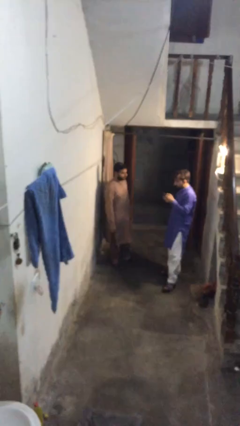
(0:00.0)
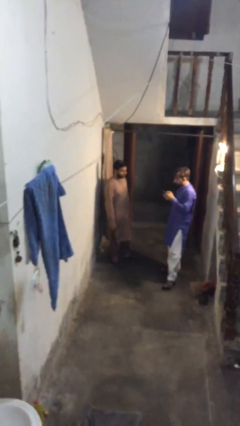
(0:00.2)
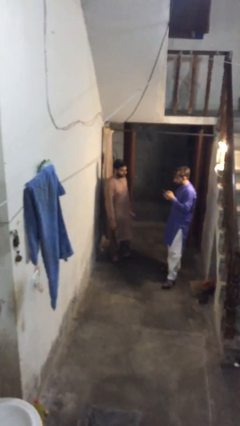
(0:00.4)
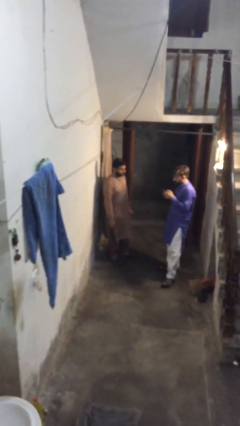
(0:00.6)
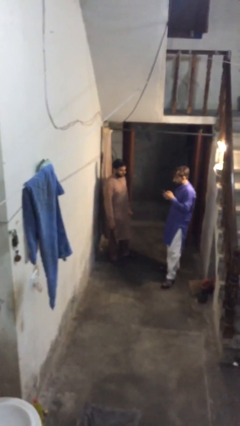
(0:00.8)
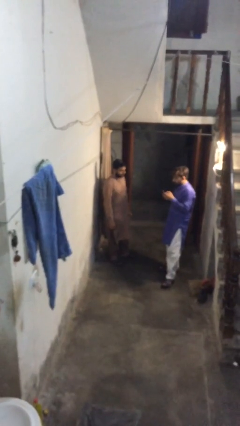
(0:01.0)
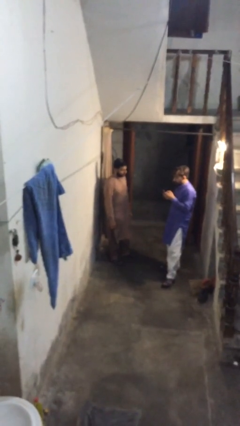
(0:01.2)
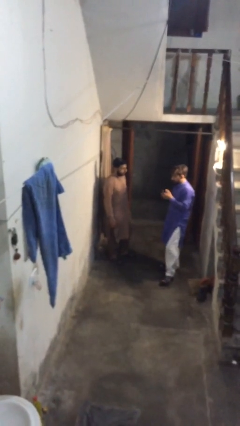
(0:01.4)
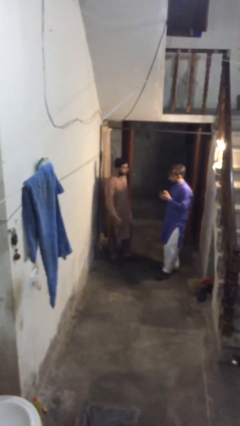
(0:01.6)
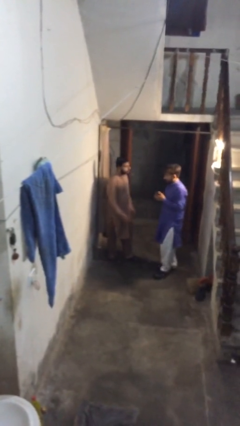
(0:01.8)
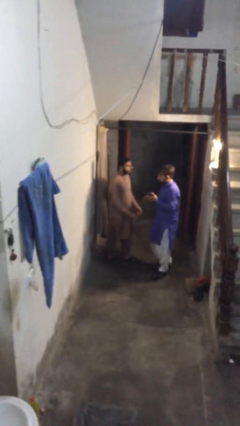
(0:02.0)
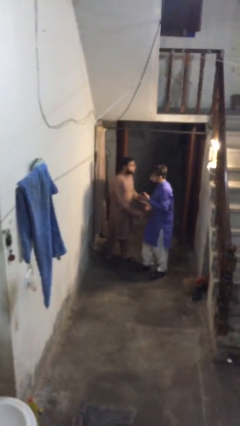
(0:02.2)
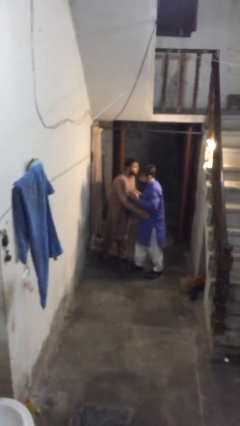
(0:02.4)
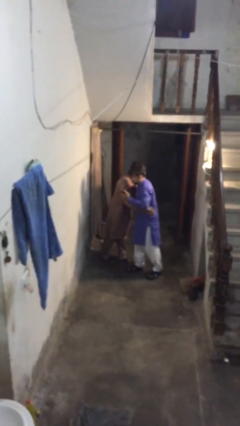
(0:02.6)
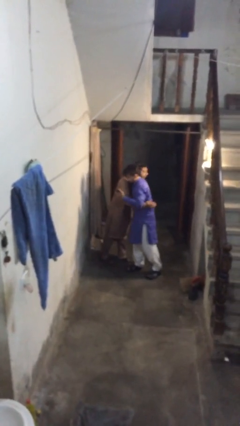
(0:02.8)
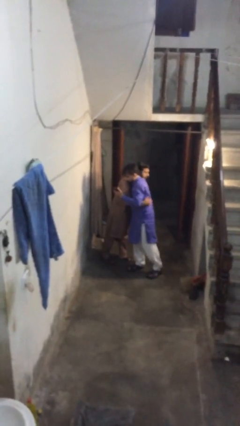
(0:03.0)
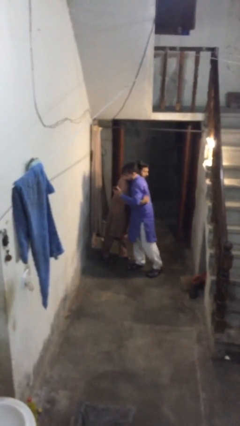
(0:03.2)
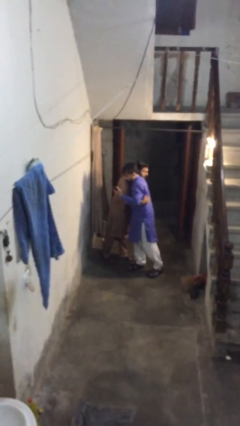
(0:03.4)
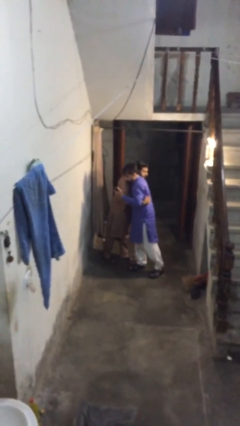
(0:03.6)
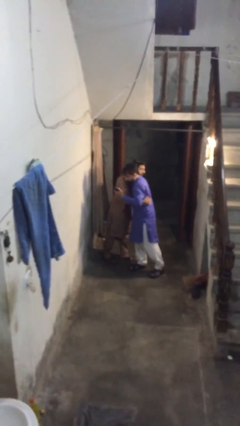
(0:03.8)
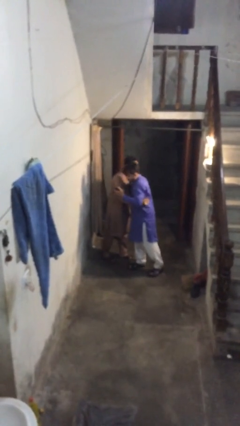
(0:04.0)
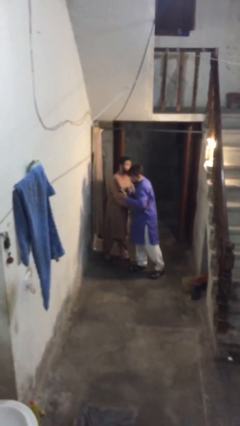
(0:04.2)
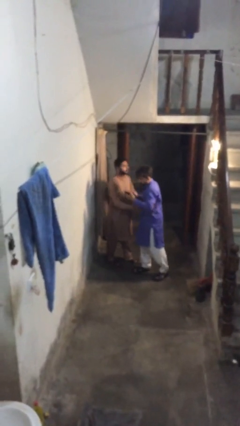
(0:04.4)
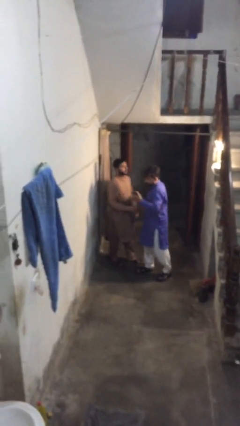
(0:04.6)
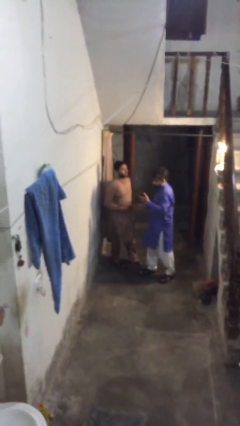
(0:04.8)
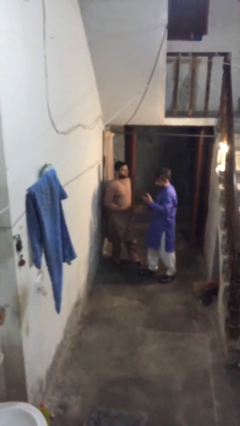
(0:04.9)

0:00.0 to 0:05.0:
person embraces person

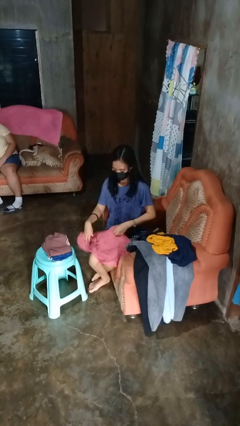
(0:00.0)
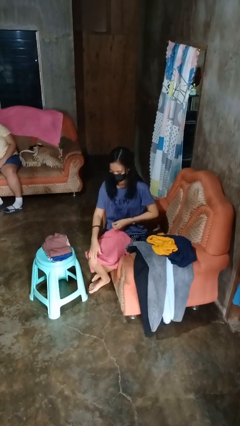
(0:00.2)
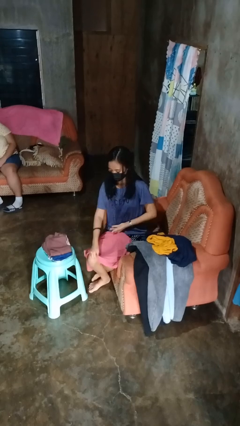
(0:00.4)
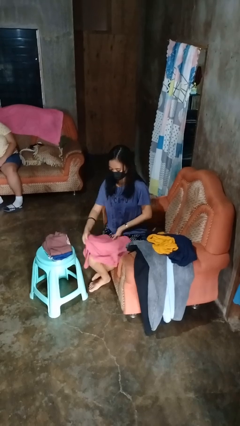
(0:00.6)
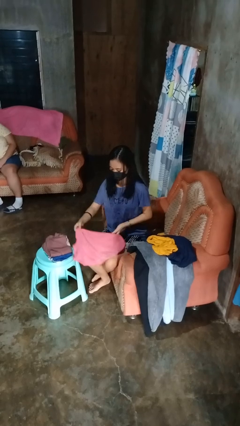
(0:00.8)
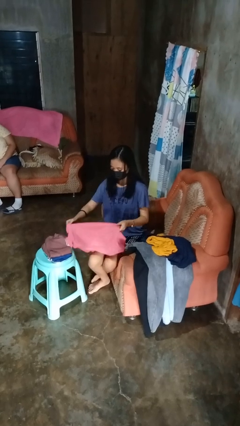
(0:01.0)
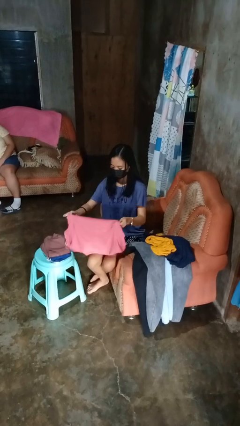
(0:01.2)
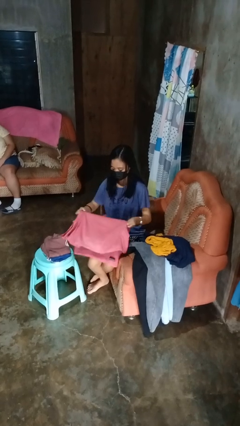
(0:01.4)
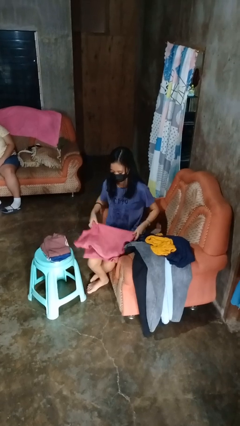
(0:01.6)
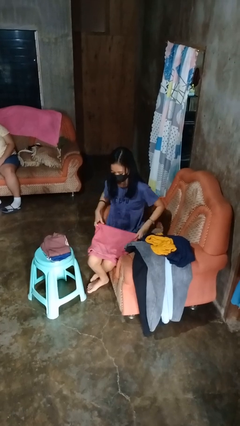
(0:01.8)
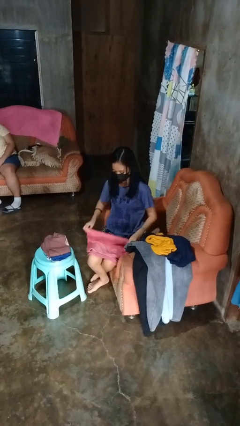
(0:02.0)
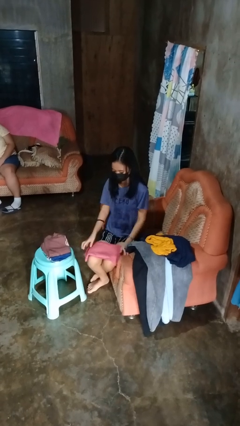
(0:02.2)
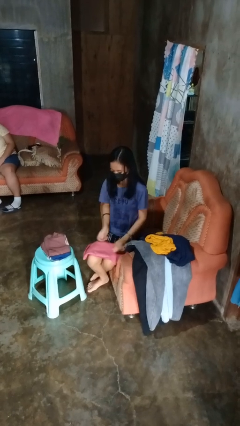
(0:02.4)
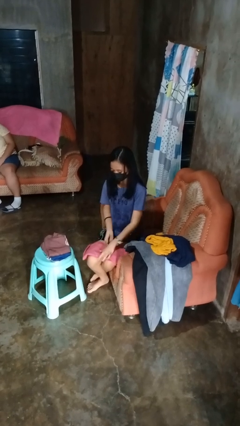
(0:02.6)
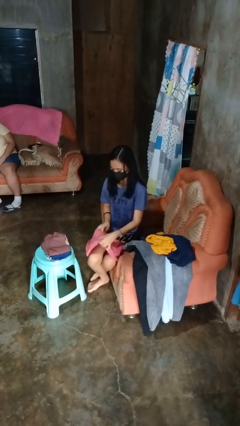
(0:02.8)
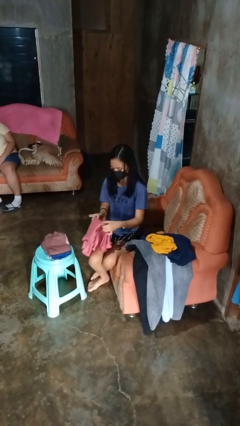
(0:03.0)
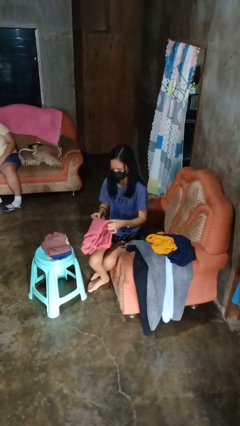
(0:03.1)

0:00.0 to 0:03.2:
person folds shirt

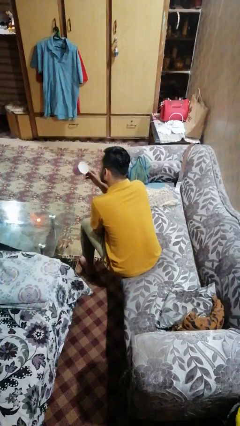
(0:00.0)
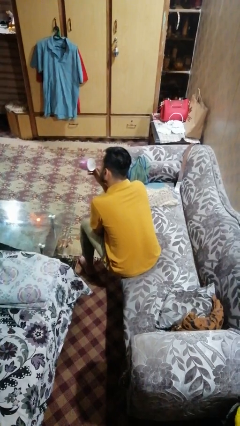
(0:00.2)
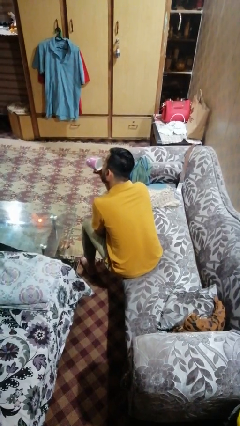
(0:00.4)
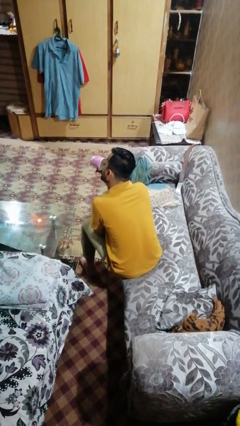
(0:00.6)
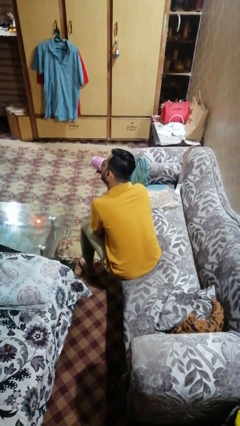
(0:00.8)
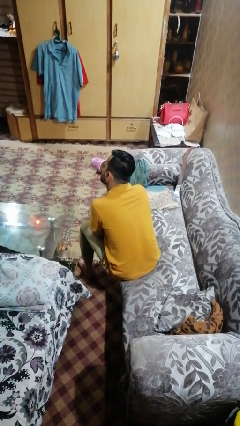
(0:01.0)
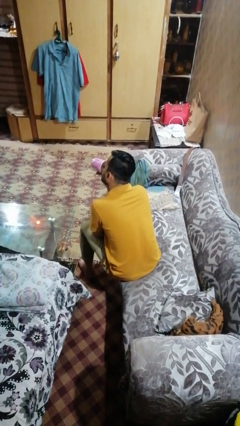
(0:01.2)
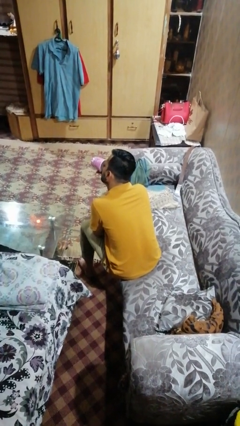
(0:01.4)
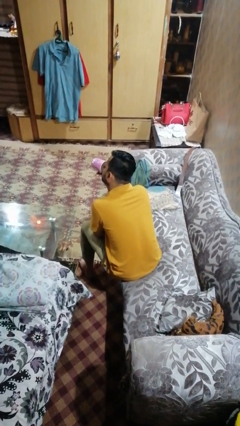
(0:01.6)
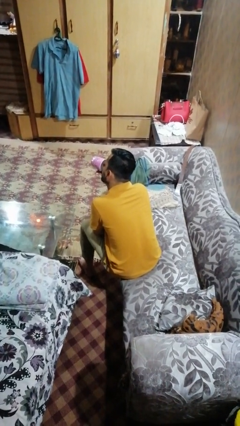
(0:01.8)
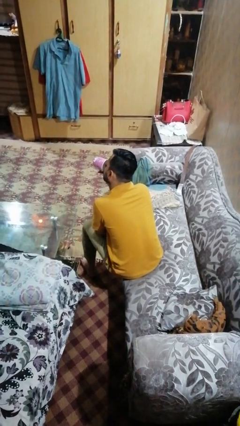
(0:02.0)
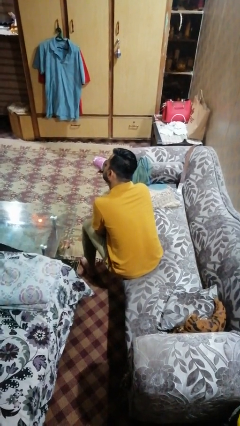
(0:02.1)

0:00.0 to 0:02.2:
person drinks from mug

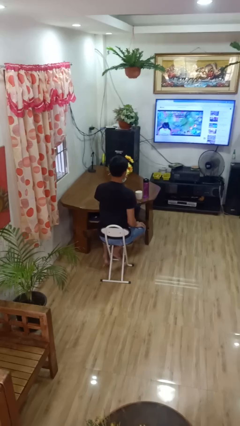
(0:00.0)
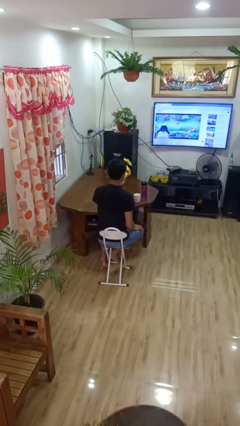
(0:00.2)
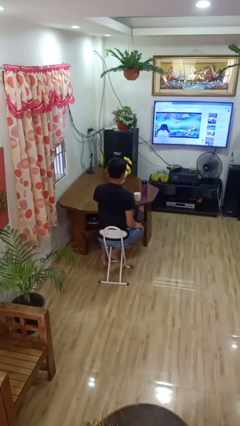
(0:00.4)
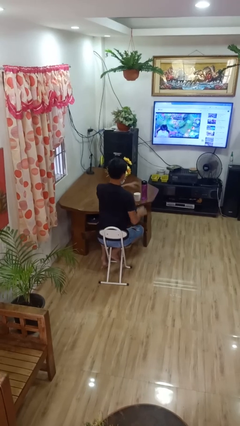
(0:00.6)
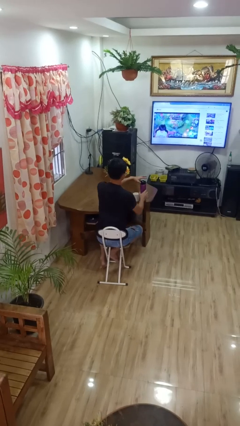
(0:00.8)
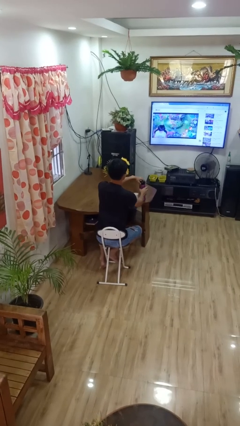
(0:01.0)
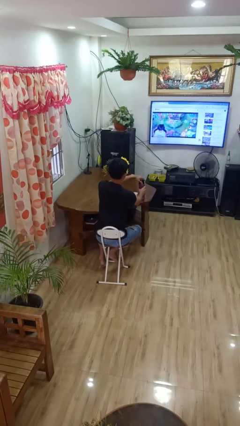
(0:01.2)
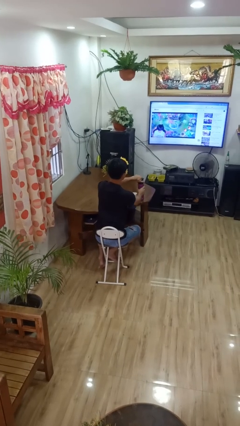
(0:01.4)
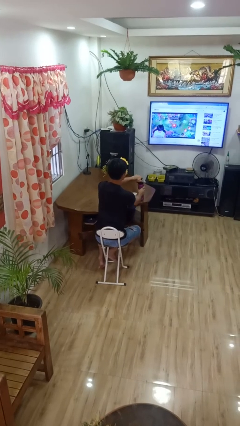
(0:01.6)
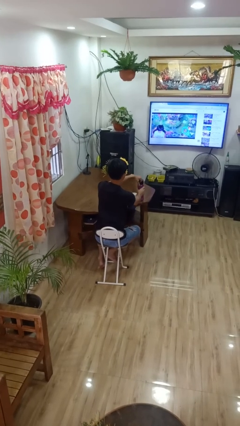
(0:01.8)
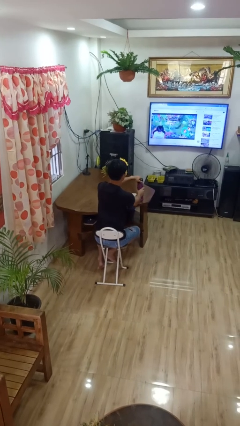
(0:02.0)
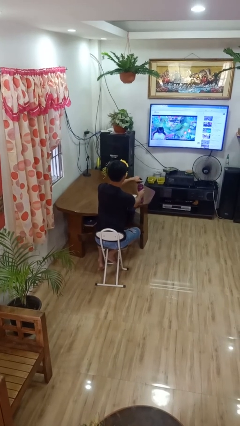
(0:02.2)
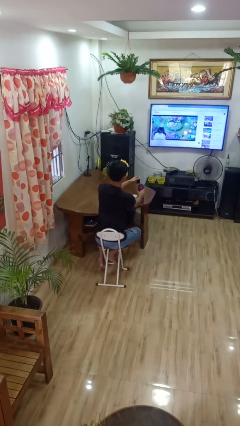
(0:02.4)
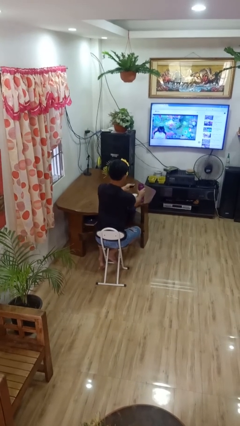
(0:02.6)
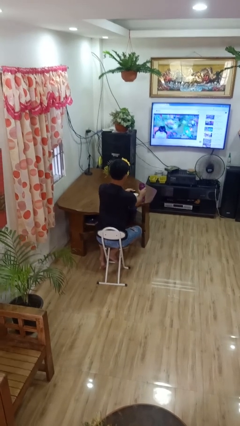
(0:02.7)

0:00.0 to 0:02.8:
person unscrews lid from bottle

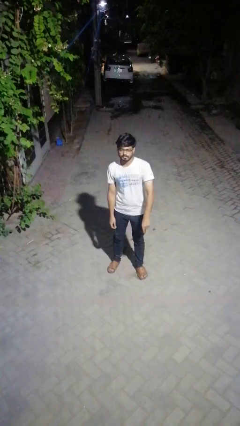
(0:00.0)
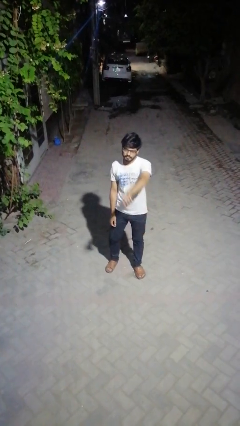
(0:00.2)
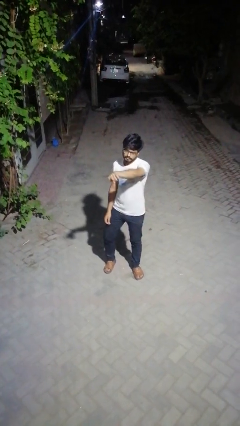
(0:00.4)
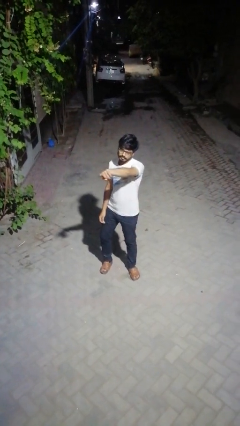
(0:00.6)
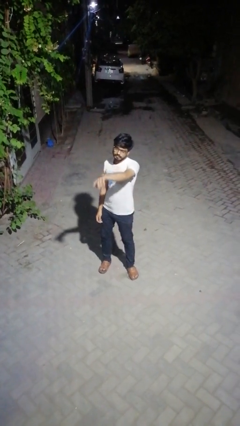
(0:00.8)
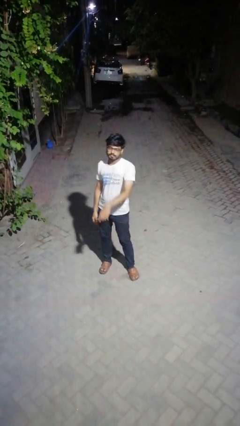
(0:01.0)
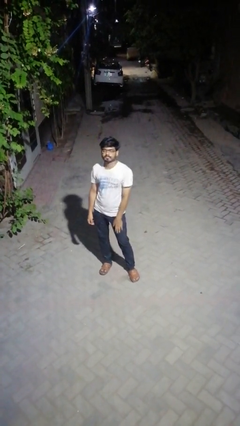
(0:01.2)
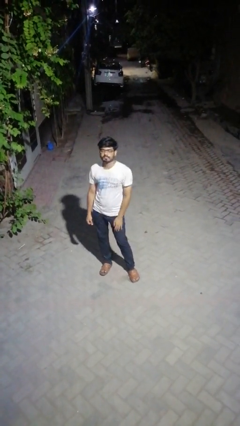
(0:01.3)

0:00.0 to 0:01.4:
person points at person

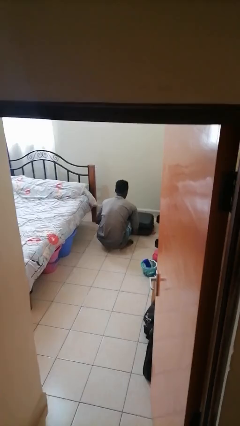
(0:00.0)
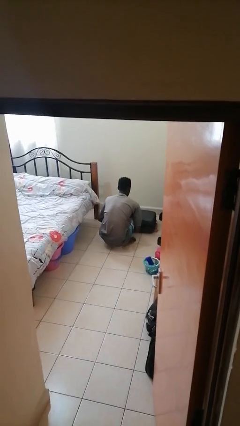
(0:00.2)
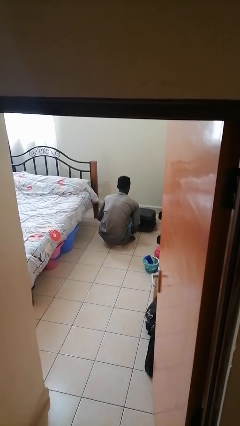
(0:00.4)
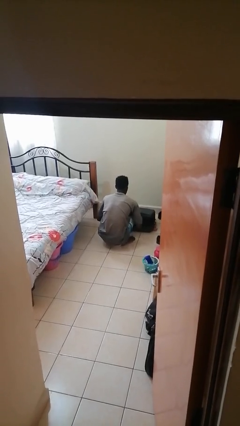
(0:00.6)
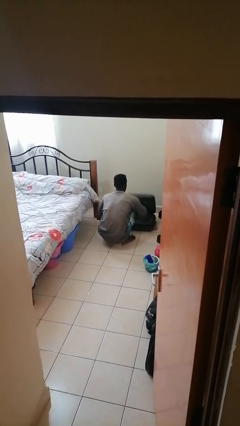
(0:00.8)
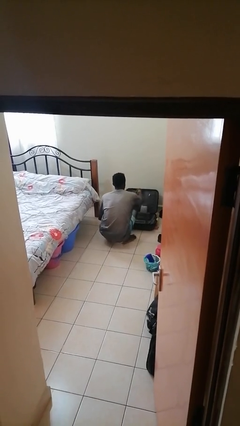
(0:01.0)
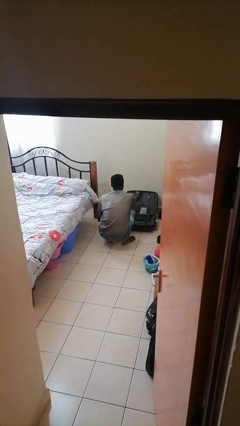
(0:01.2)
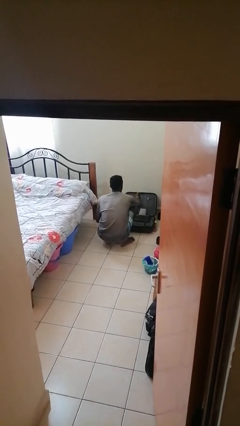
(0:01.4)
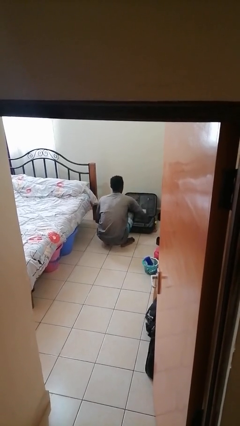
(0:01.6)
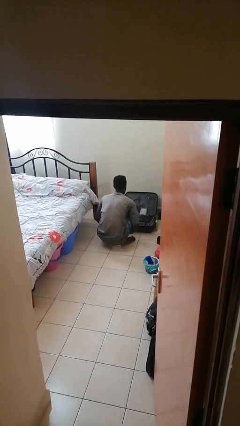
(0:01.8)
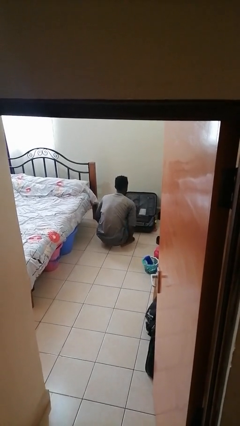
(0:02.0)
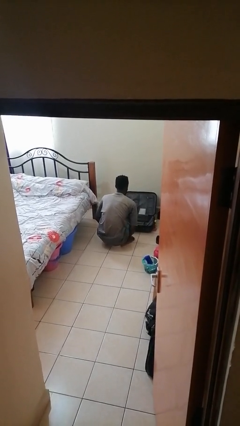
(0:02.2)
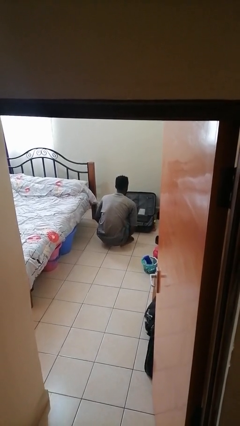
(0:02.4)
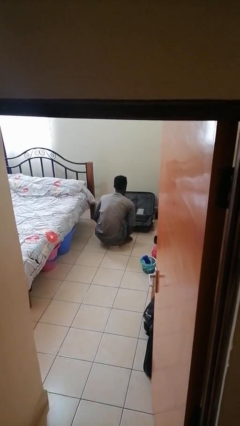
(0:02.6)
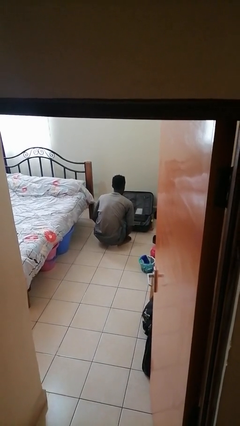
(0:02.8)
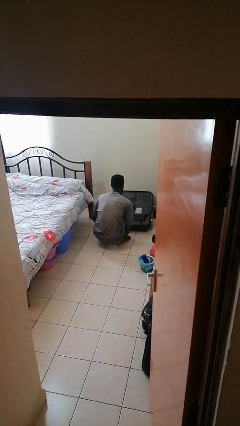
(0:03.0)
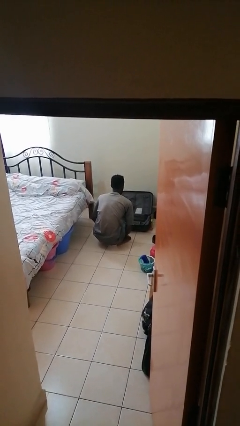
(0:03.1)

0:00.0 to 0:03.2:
person opens suitcase
